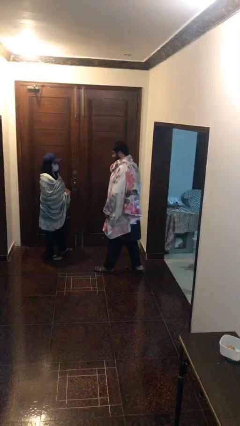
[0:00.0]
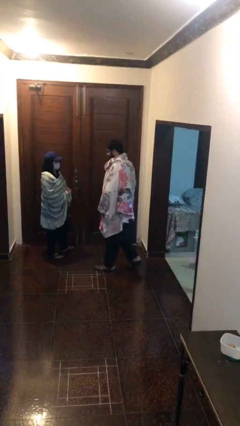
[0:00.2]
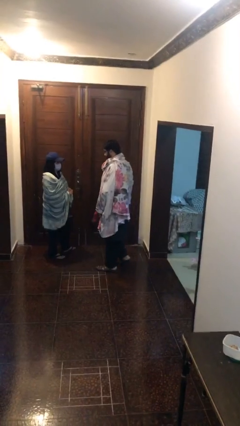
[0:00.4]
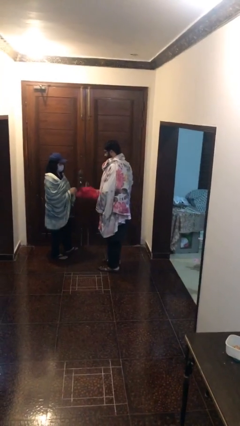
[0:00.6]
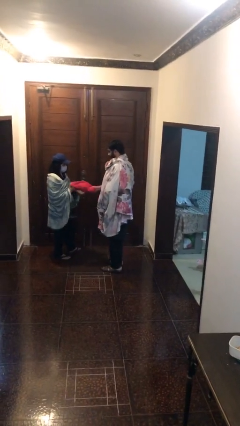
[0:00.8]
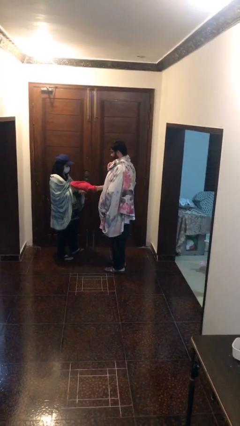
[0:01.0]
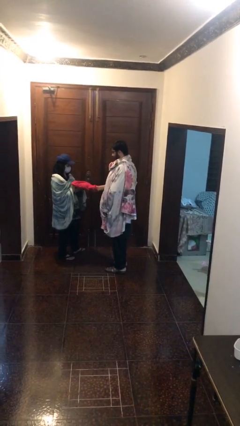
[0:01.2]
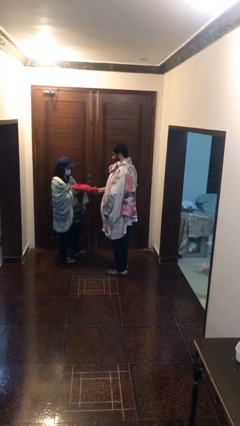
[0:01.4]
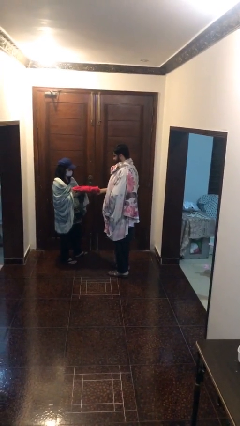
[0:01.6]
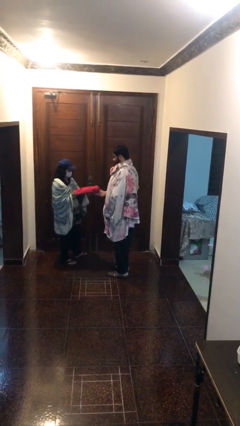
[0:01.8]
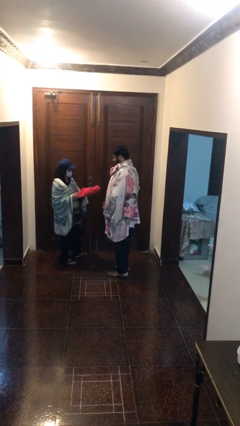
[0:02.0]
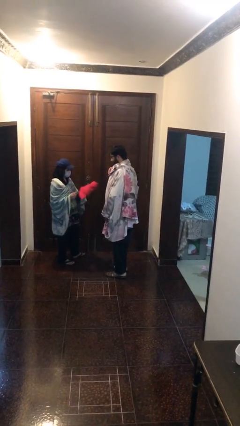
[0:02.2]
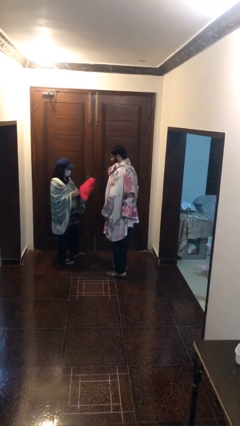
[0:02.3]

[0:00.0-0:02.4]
person transfers object to person

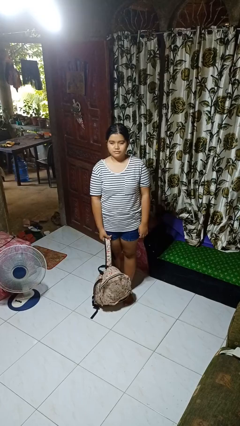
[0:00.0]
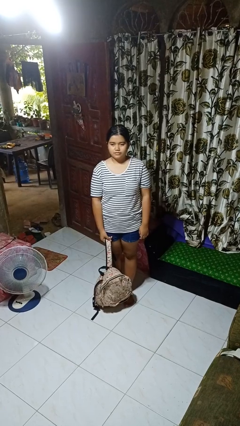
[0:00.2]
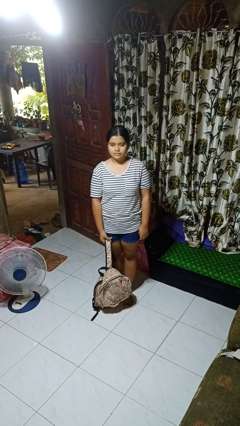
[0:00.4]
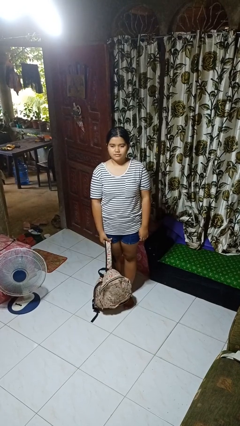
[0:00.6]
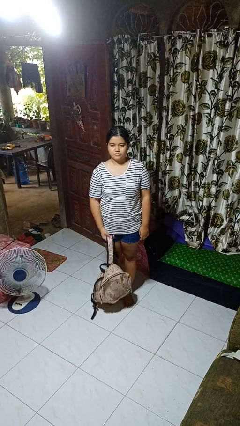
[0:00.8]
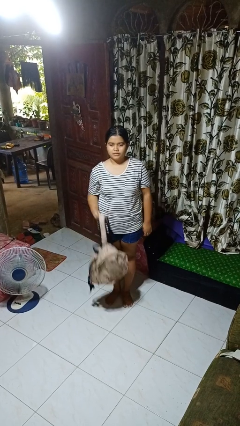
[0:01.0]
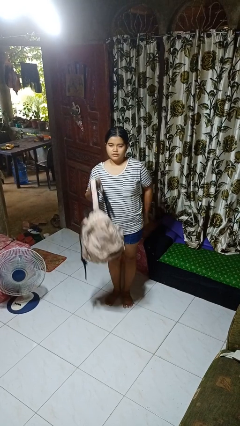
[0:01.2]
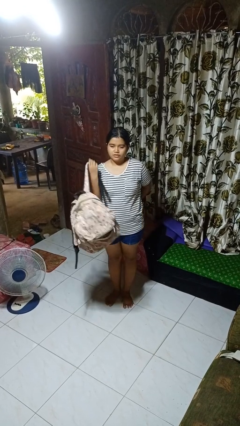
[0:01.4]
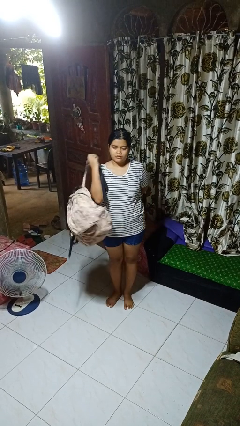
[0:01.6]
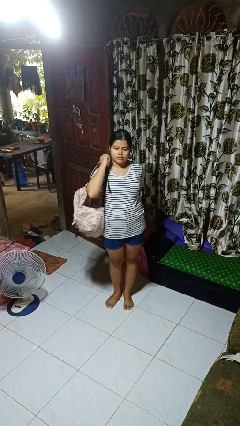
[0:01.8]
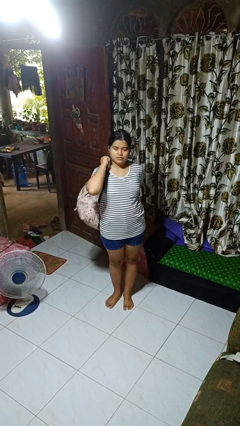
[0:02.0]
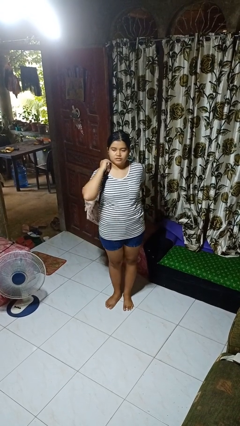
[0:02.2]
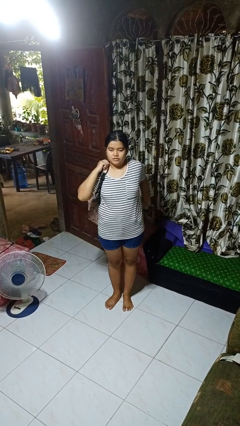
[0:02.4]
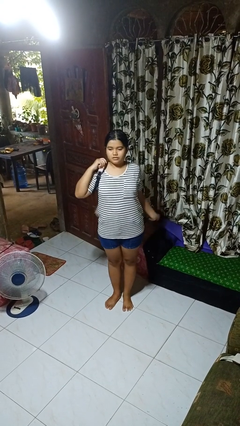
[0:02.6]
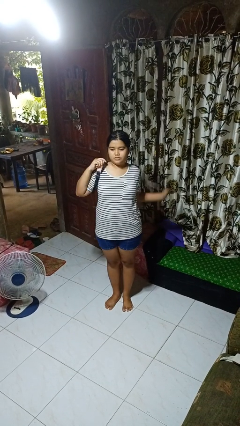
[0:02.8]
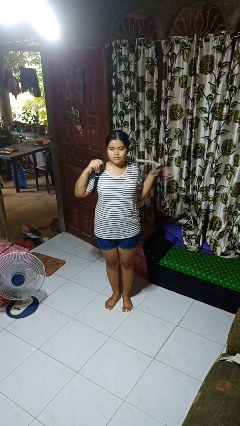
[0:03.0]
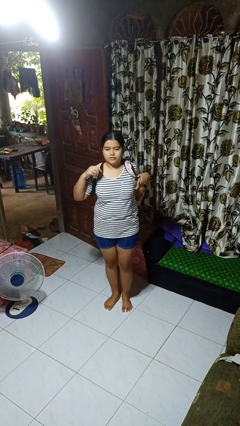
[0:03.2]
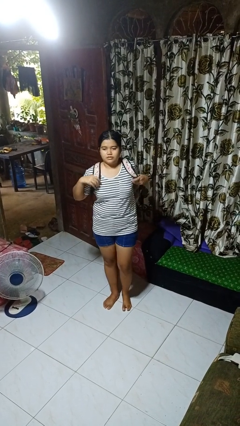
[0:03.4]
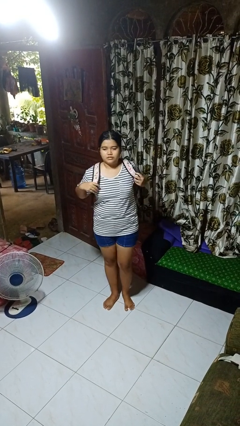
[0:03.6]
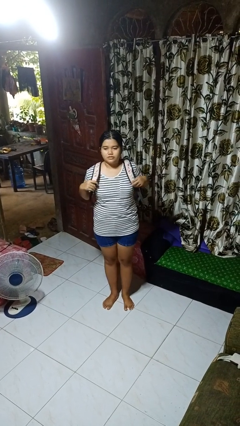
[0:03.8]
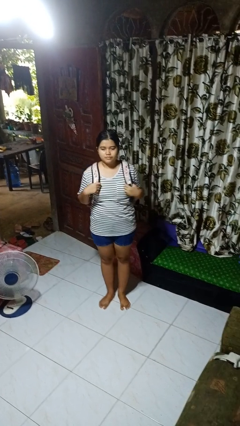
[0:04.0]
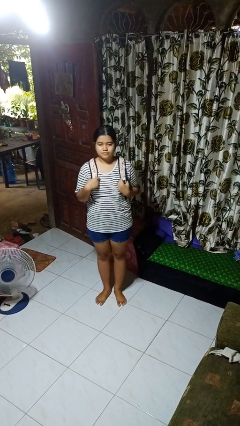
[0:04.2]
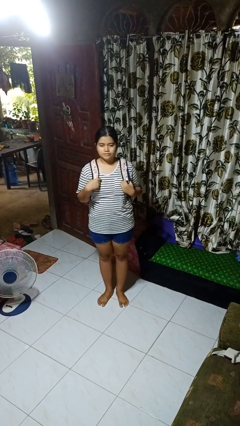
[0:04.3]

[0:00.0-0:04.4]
person puts on backpack

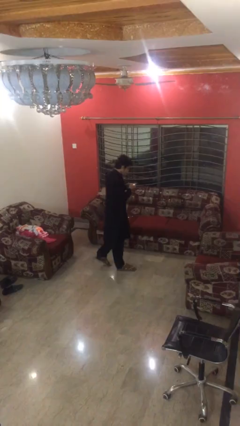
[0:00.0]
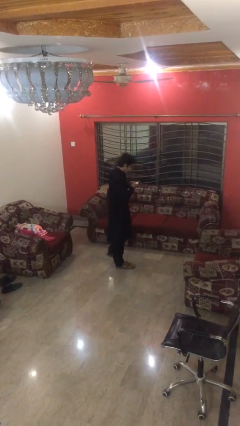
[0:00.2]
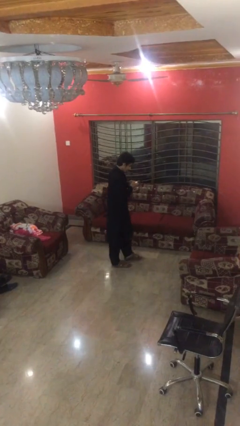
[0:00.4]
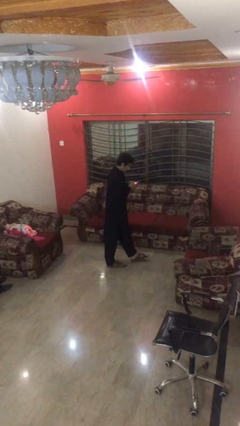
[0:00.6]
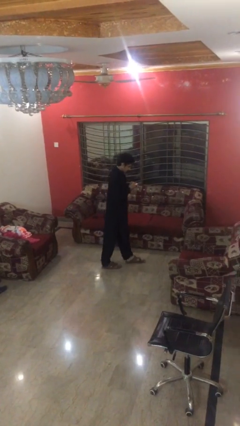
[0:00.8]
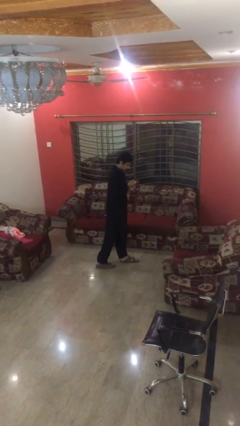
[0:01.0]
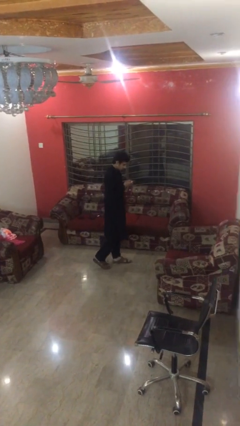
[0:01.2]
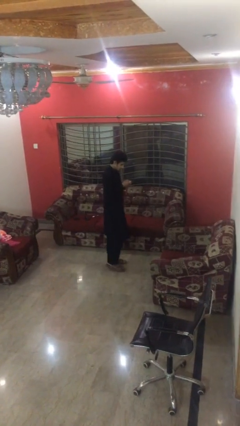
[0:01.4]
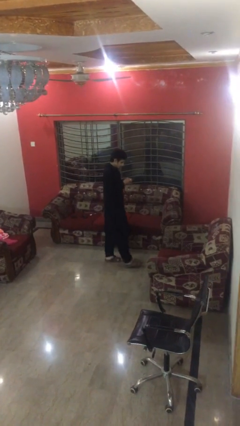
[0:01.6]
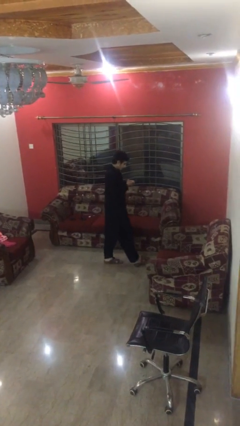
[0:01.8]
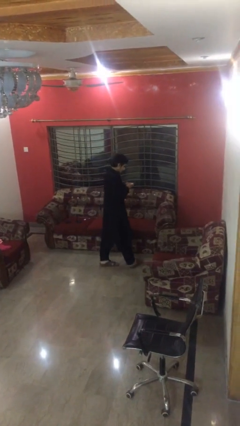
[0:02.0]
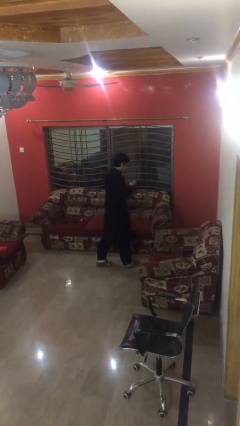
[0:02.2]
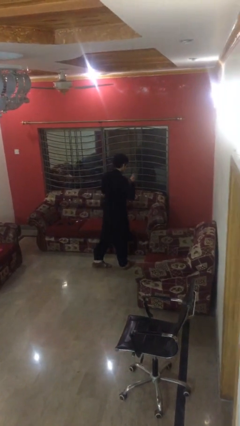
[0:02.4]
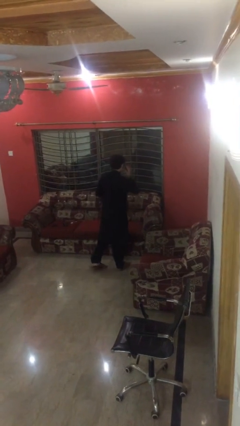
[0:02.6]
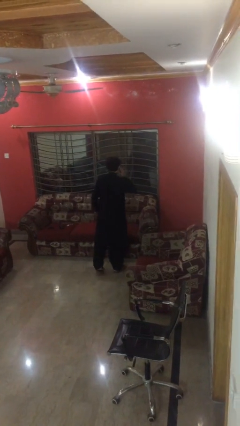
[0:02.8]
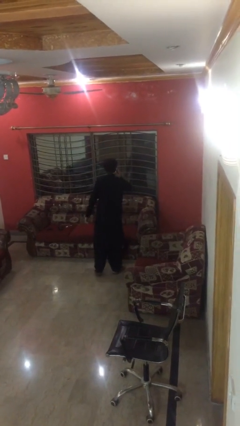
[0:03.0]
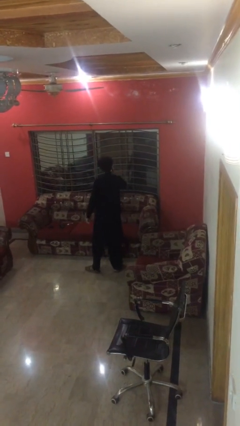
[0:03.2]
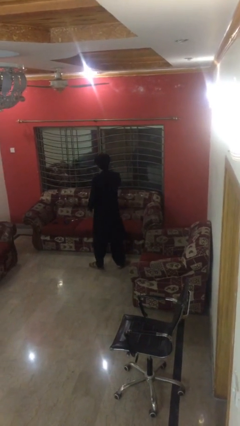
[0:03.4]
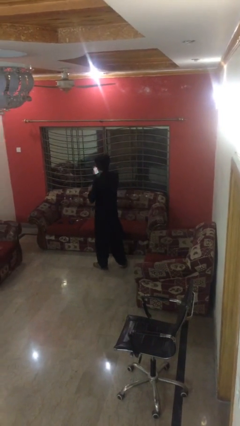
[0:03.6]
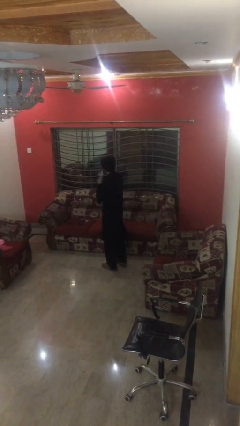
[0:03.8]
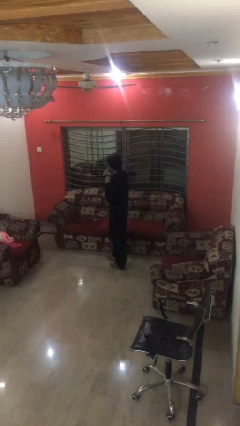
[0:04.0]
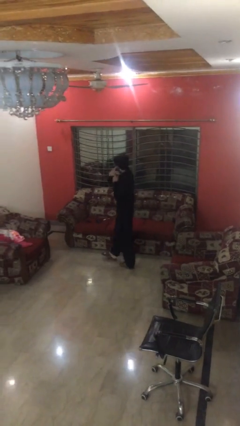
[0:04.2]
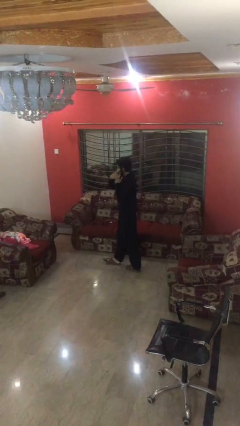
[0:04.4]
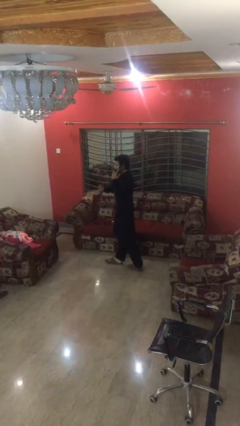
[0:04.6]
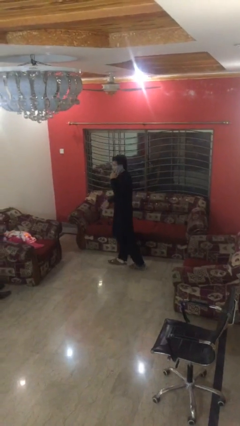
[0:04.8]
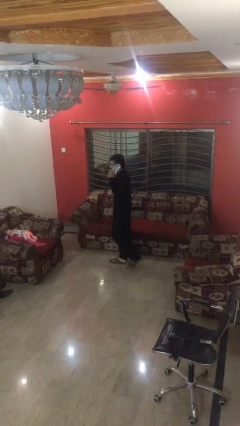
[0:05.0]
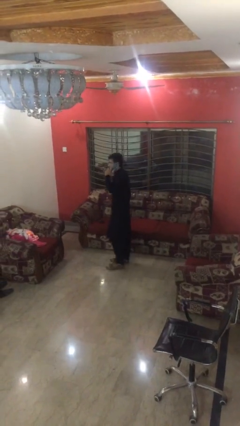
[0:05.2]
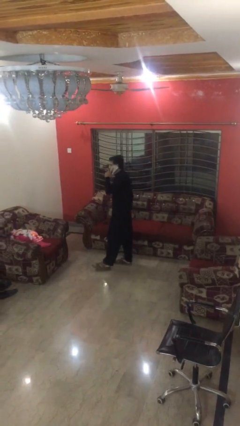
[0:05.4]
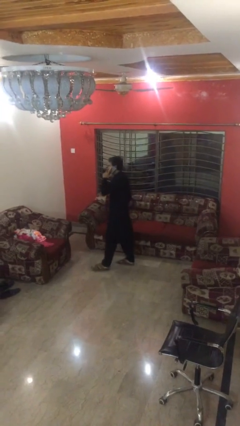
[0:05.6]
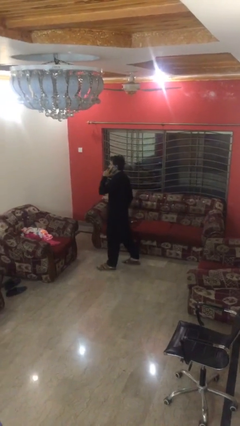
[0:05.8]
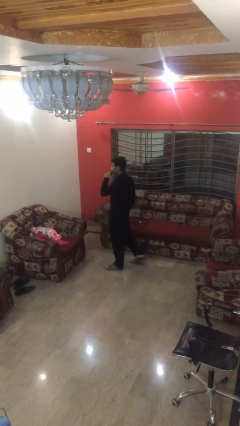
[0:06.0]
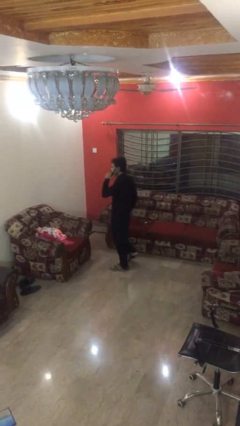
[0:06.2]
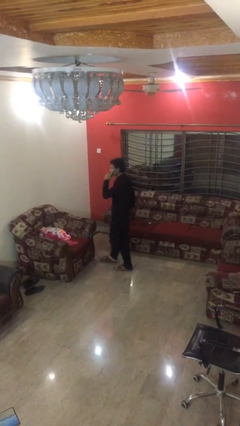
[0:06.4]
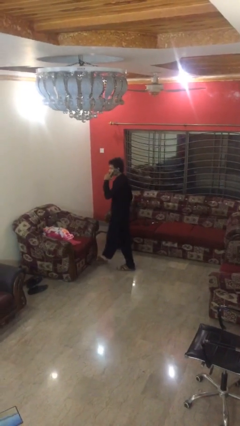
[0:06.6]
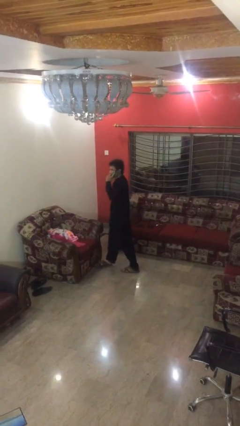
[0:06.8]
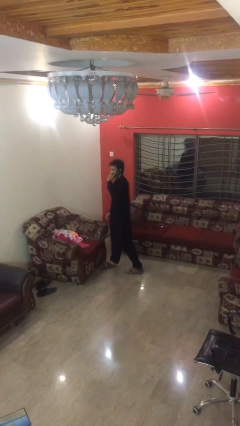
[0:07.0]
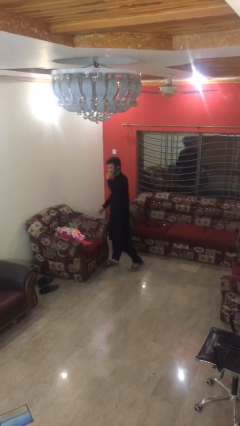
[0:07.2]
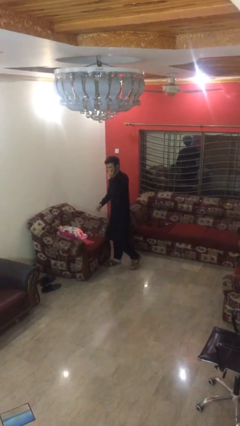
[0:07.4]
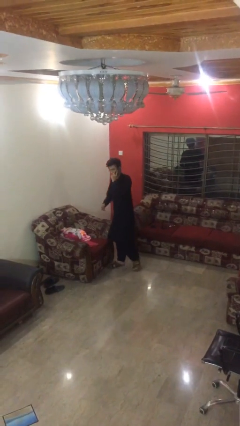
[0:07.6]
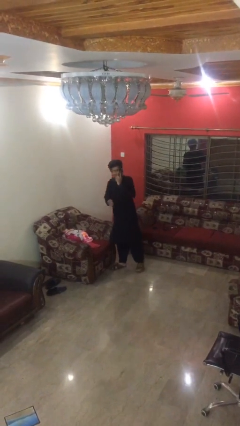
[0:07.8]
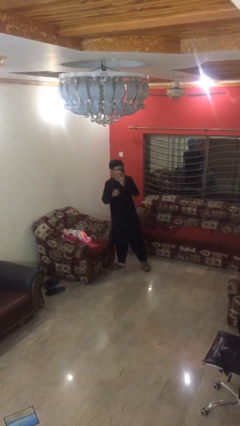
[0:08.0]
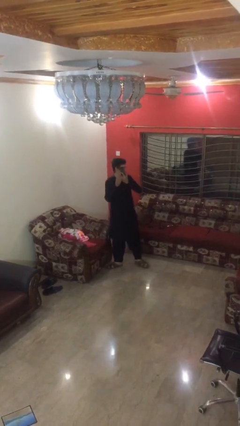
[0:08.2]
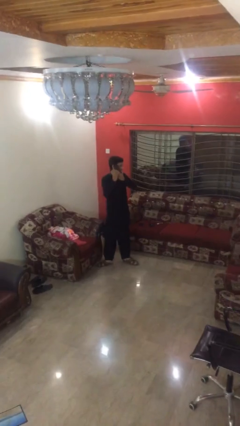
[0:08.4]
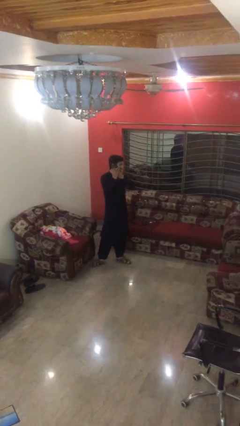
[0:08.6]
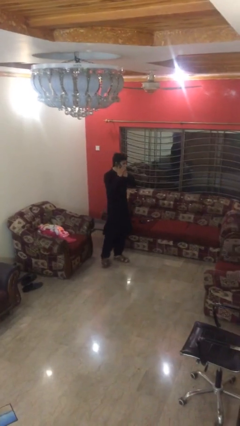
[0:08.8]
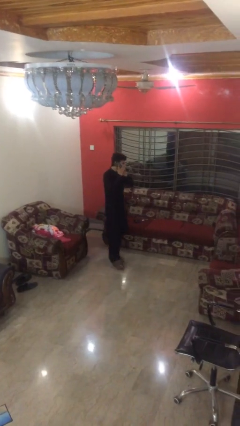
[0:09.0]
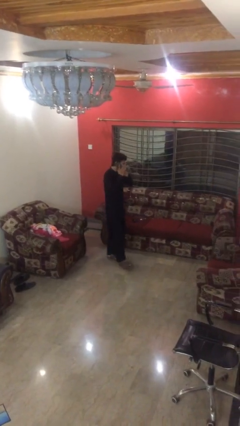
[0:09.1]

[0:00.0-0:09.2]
person talks on phone

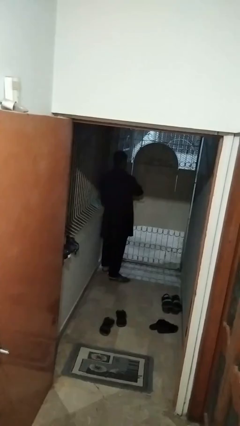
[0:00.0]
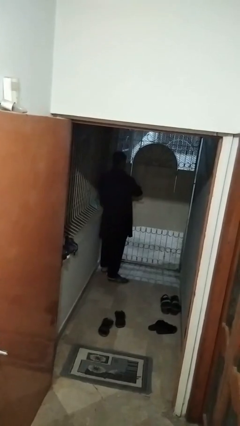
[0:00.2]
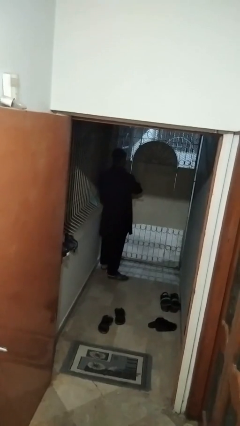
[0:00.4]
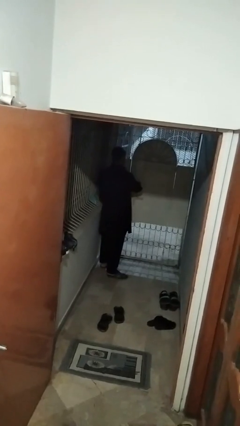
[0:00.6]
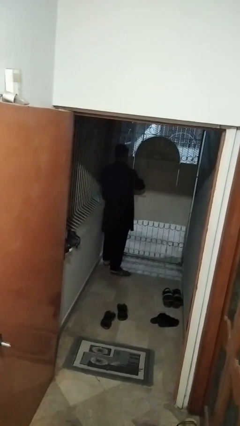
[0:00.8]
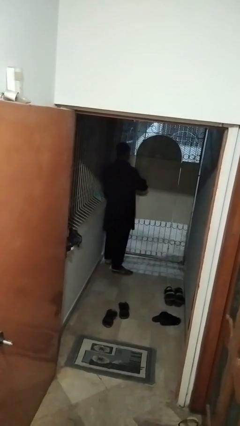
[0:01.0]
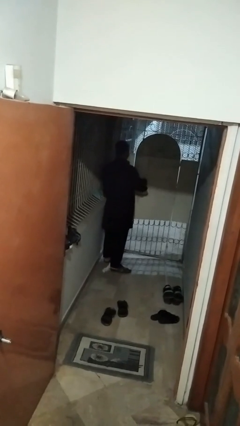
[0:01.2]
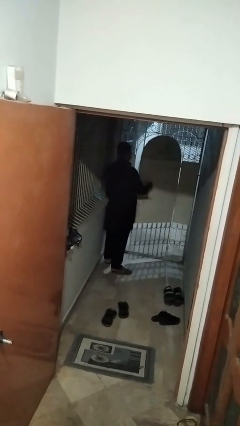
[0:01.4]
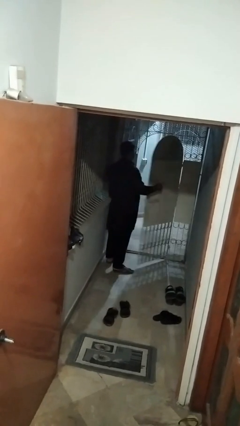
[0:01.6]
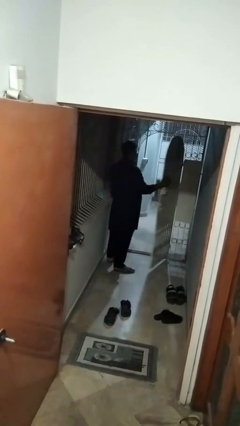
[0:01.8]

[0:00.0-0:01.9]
person opens gate
